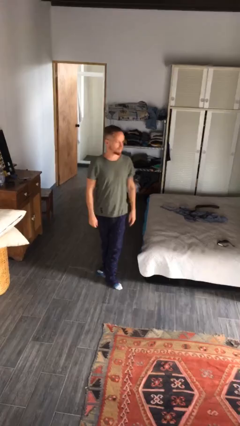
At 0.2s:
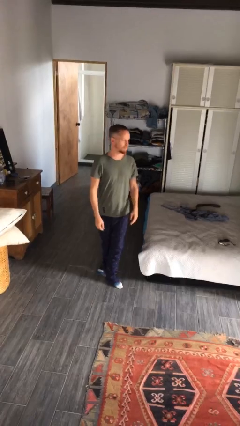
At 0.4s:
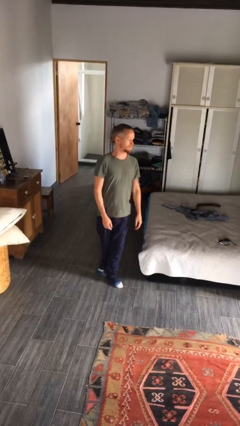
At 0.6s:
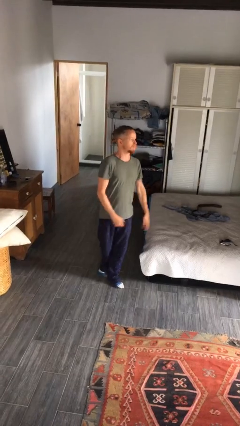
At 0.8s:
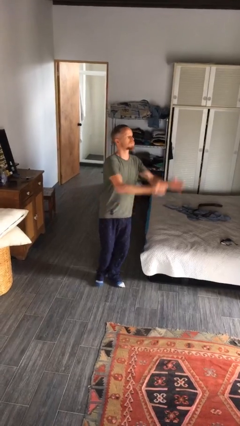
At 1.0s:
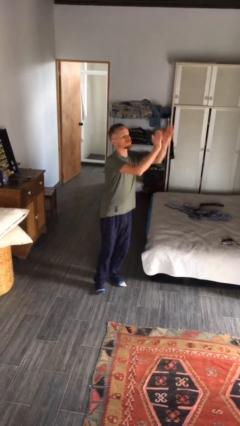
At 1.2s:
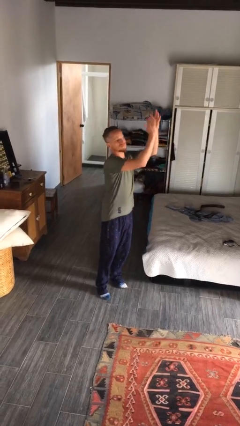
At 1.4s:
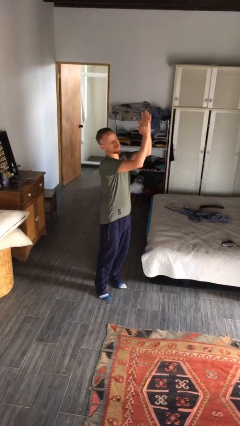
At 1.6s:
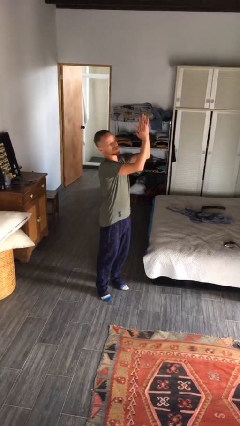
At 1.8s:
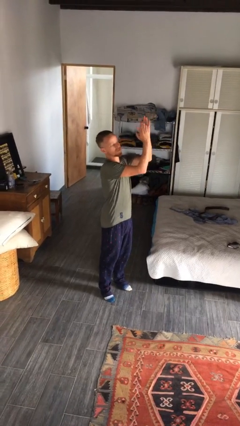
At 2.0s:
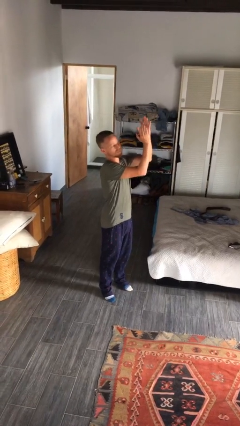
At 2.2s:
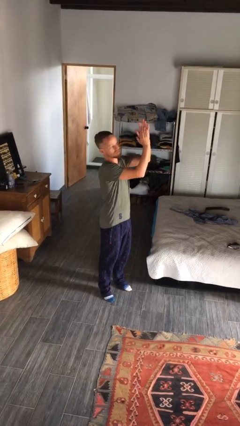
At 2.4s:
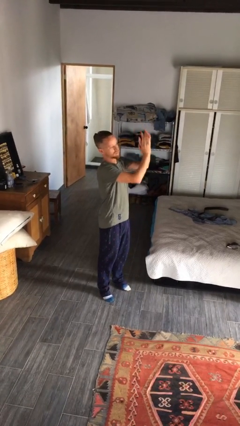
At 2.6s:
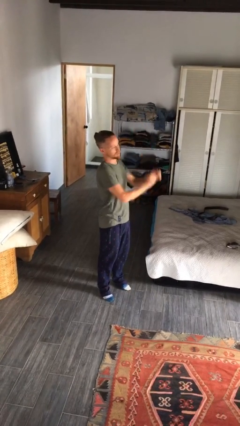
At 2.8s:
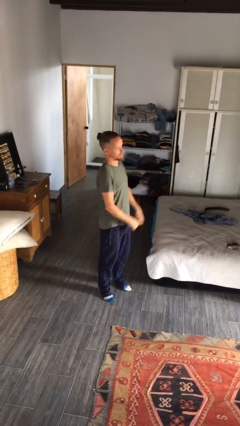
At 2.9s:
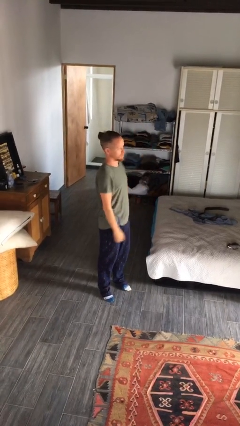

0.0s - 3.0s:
person claps hands

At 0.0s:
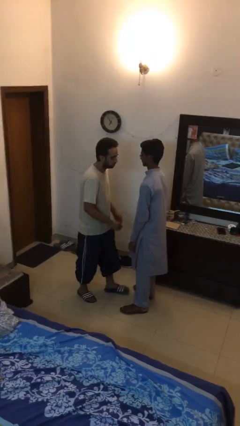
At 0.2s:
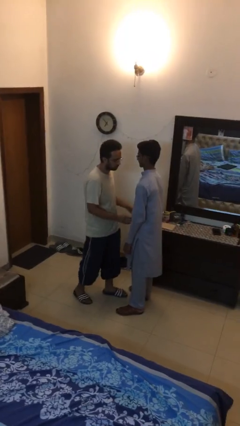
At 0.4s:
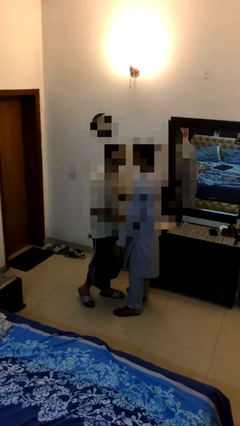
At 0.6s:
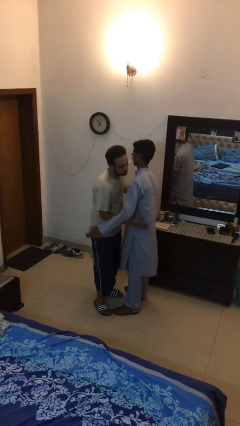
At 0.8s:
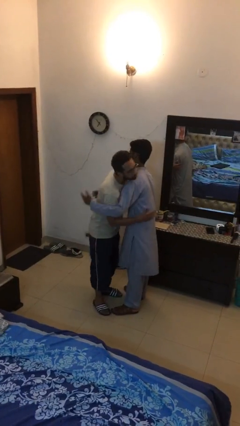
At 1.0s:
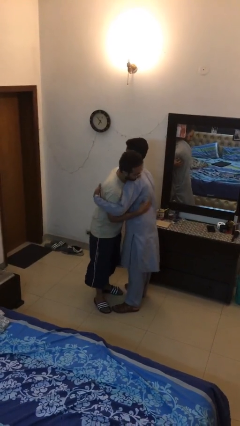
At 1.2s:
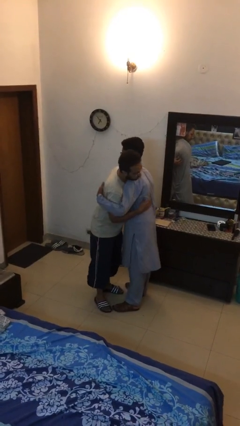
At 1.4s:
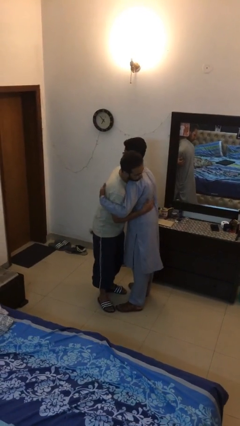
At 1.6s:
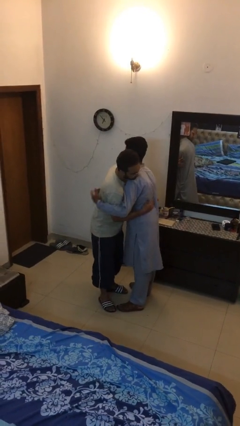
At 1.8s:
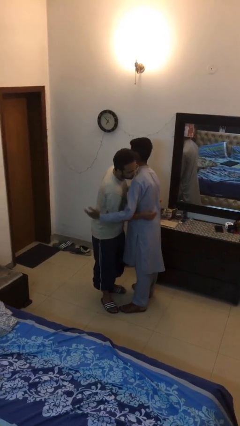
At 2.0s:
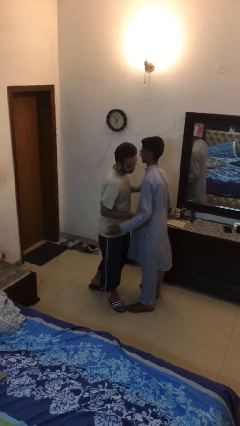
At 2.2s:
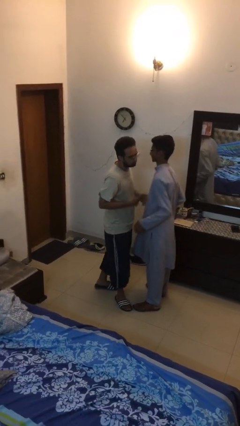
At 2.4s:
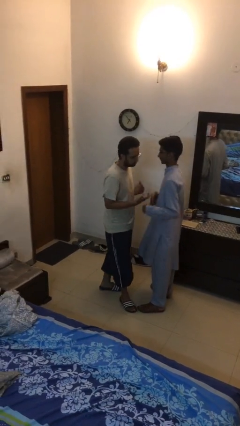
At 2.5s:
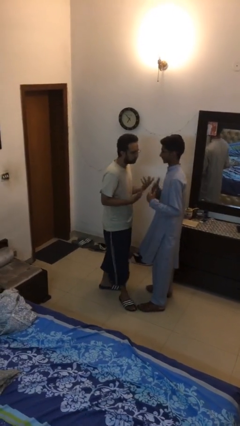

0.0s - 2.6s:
person embraces person

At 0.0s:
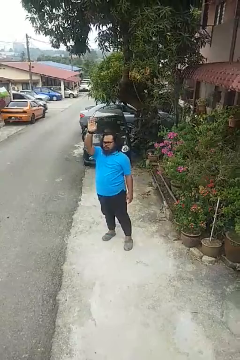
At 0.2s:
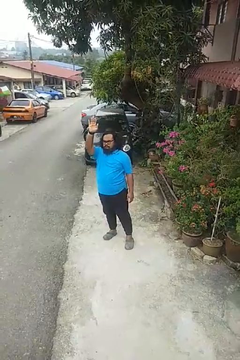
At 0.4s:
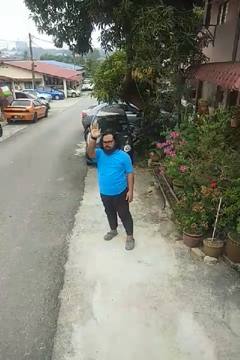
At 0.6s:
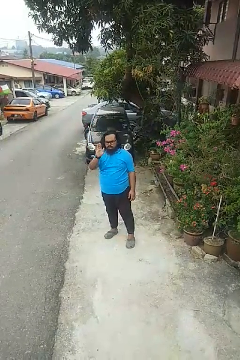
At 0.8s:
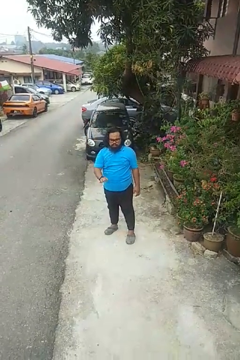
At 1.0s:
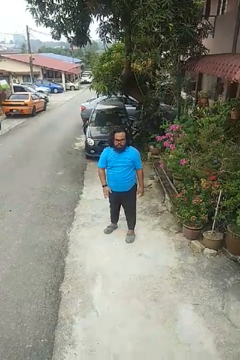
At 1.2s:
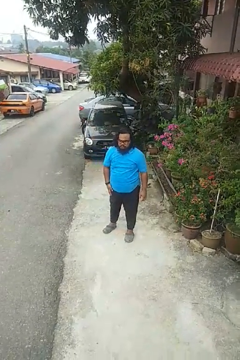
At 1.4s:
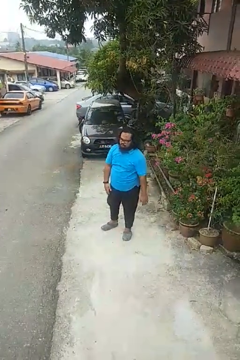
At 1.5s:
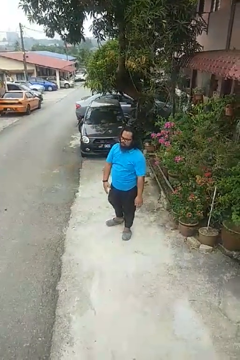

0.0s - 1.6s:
person gestures lower hand

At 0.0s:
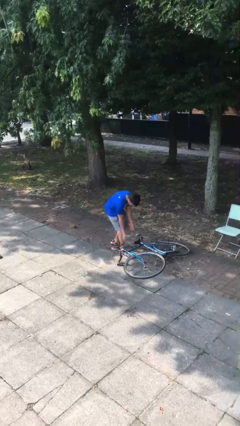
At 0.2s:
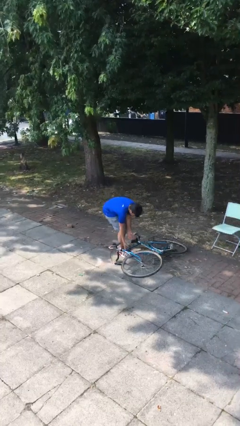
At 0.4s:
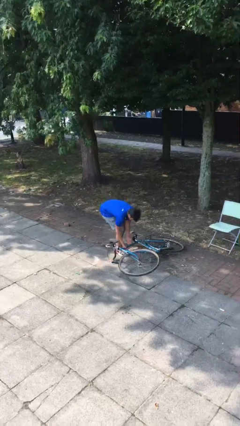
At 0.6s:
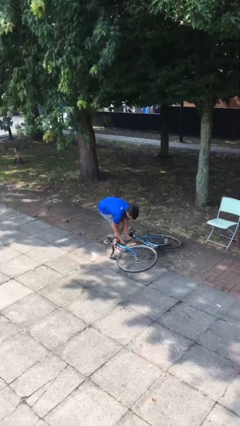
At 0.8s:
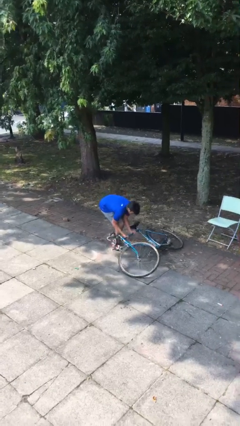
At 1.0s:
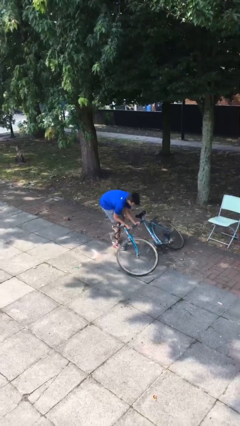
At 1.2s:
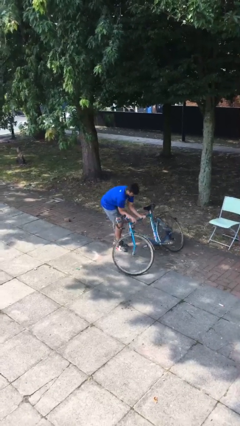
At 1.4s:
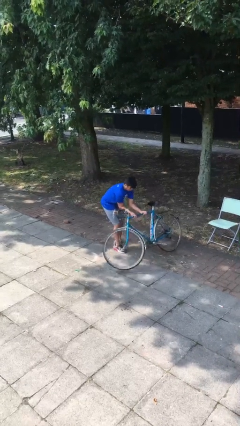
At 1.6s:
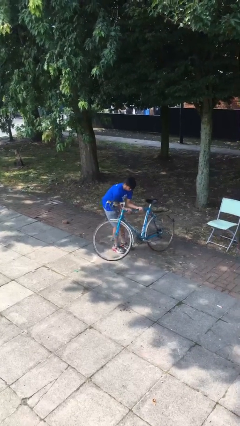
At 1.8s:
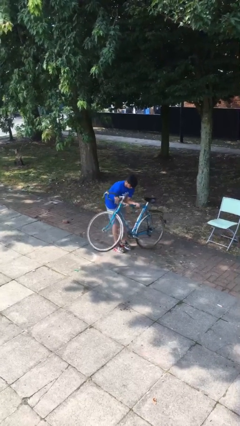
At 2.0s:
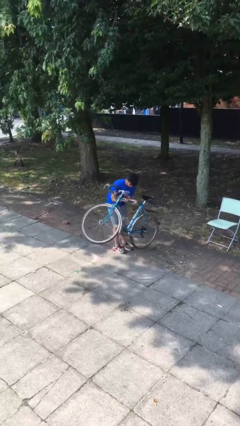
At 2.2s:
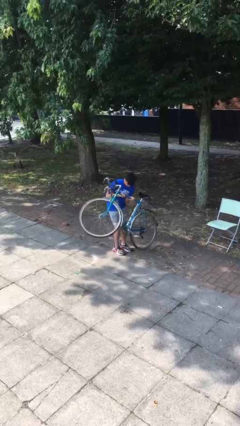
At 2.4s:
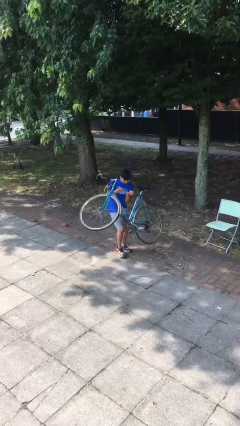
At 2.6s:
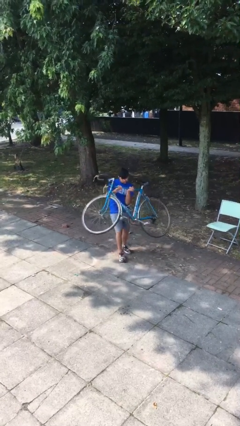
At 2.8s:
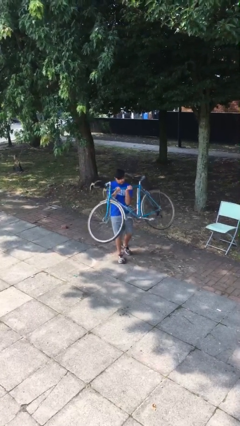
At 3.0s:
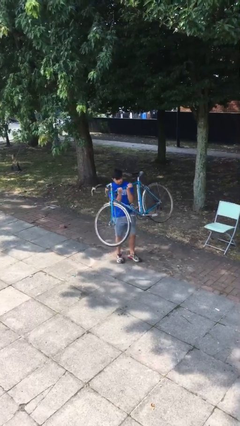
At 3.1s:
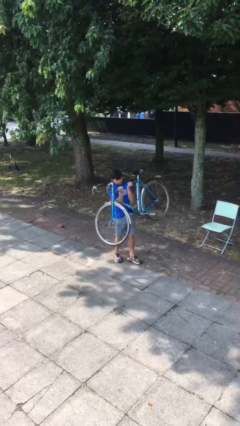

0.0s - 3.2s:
person picks up object from floor

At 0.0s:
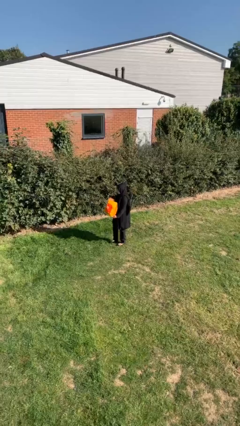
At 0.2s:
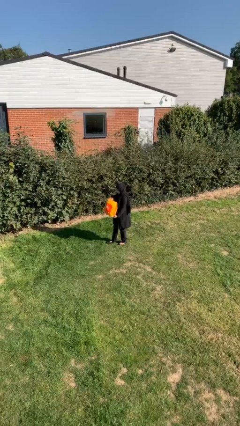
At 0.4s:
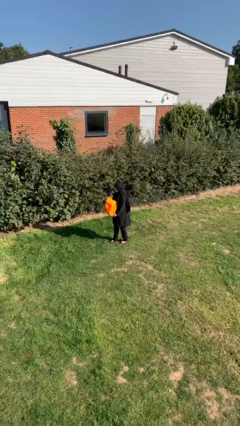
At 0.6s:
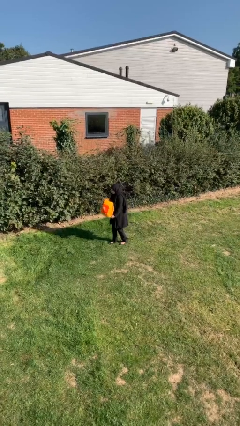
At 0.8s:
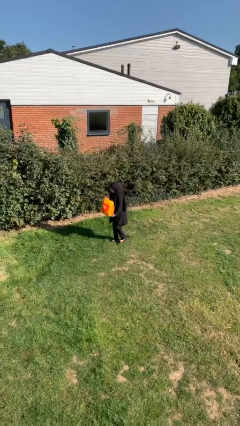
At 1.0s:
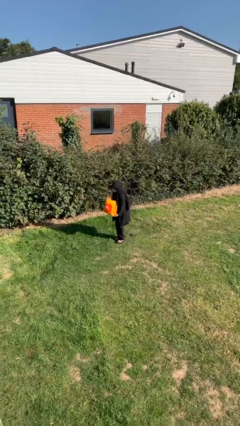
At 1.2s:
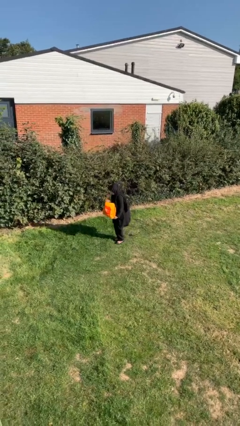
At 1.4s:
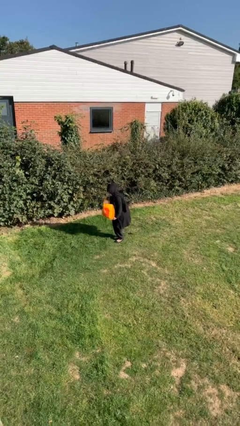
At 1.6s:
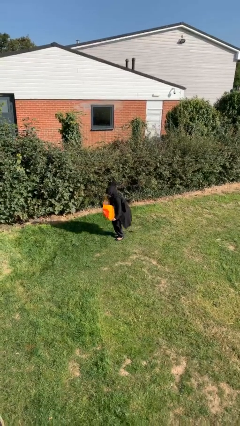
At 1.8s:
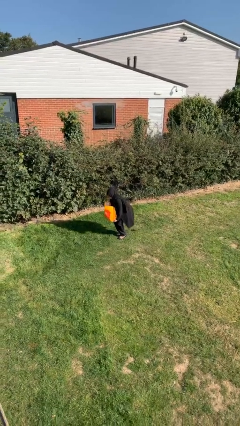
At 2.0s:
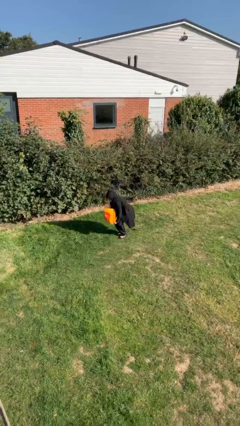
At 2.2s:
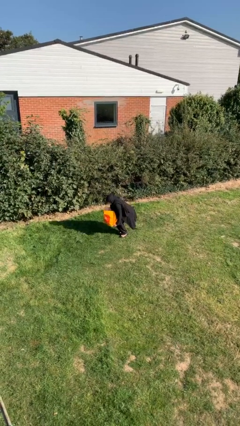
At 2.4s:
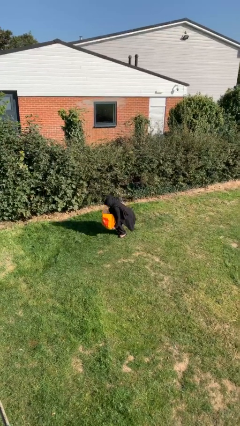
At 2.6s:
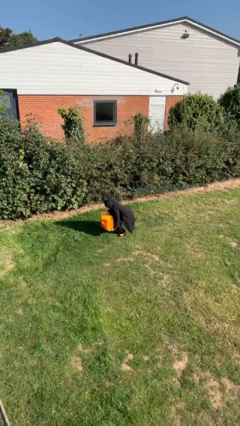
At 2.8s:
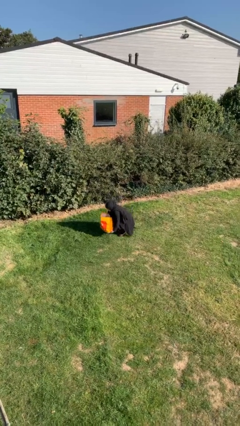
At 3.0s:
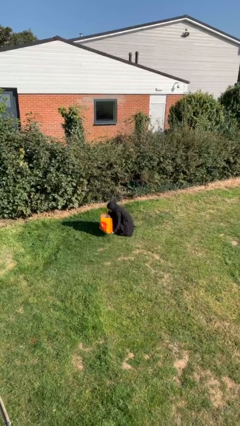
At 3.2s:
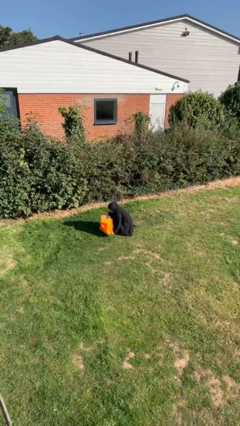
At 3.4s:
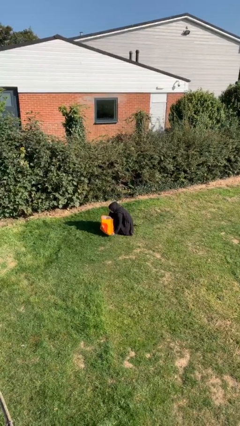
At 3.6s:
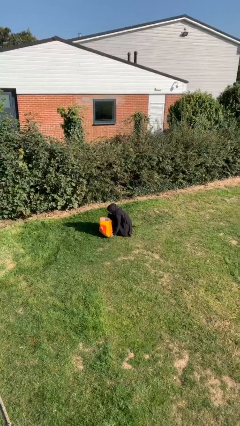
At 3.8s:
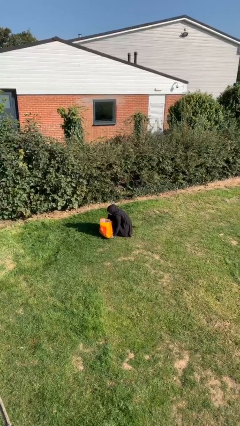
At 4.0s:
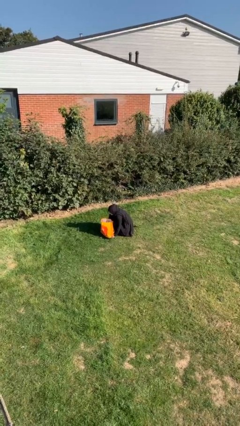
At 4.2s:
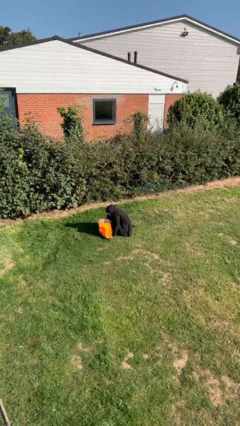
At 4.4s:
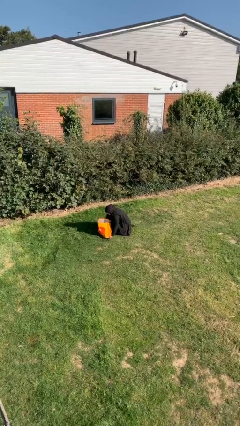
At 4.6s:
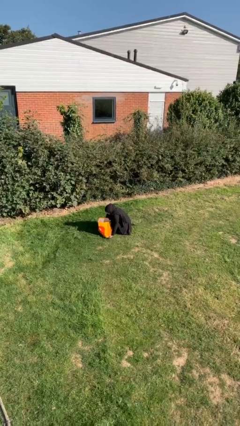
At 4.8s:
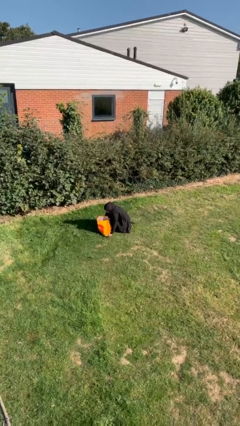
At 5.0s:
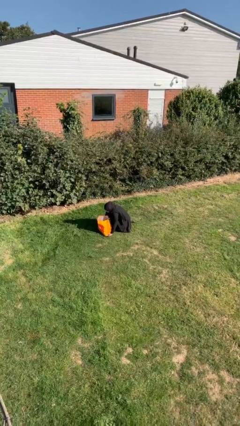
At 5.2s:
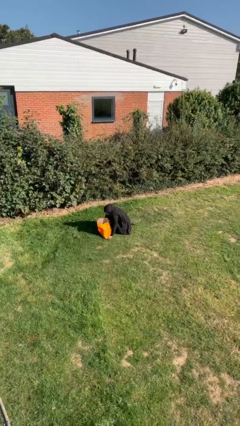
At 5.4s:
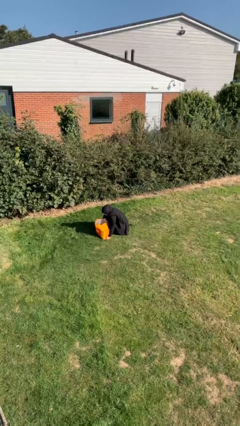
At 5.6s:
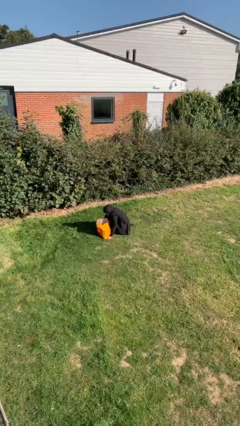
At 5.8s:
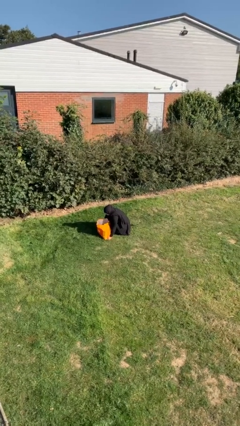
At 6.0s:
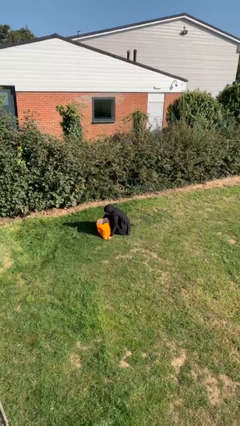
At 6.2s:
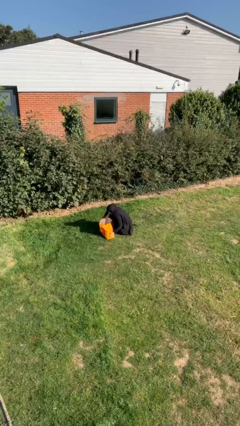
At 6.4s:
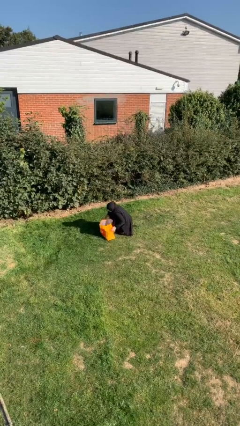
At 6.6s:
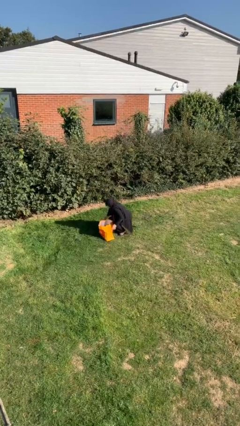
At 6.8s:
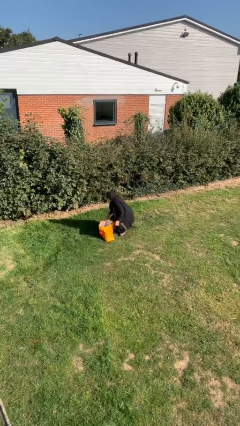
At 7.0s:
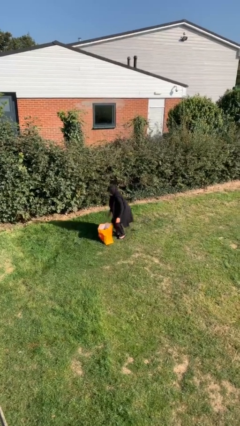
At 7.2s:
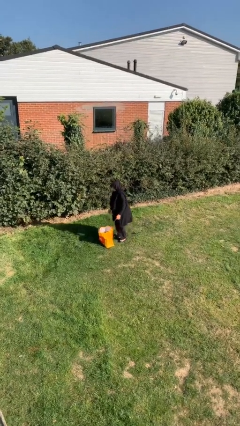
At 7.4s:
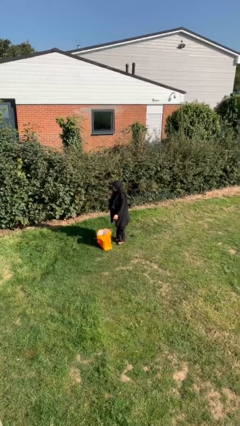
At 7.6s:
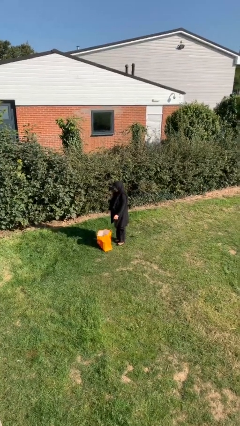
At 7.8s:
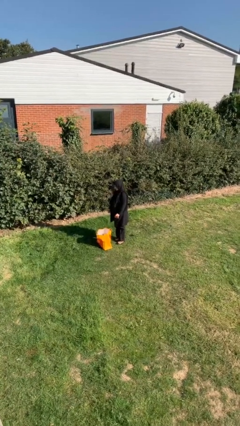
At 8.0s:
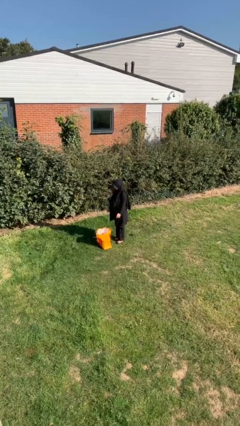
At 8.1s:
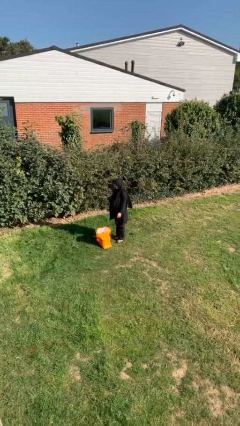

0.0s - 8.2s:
person puts down object on floor
